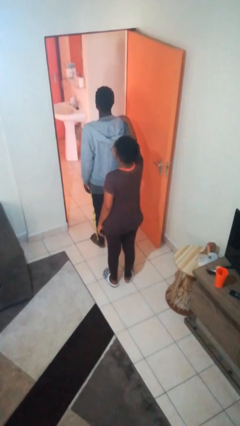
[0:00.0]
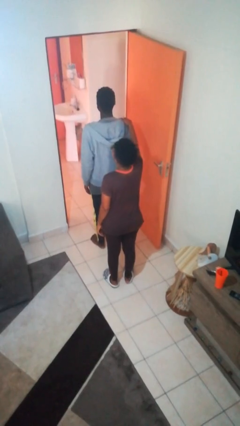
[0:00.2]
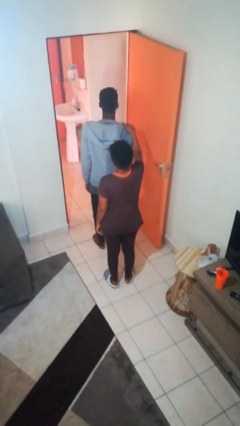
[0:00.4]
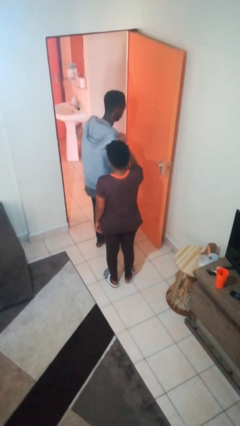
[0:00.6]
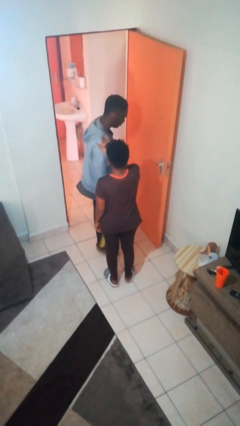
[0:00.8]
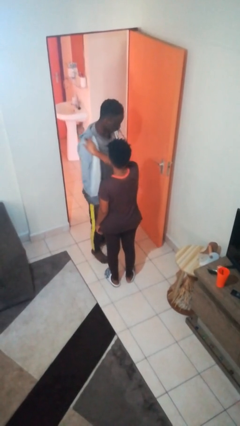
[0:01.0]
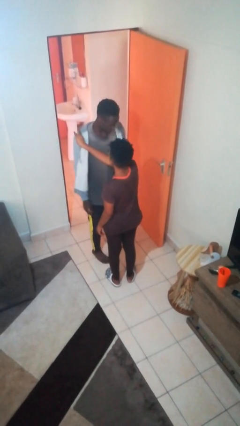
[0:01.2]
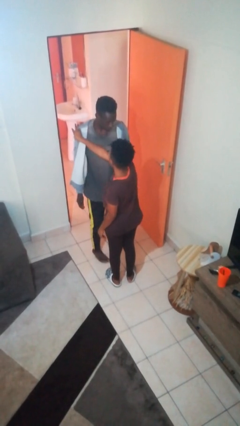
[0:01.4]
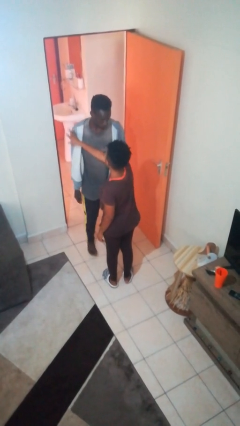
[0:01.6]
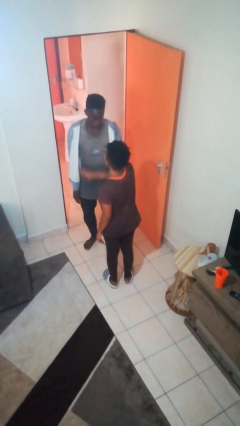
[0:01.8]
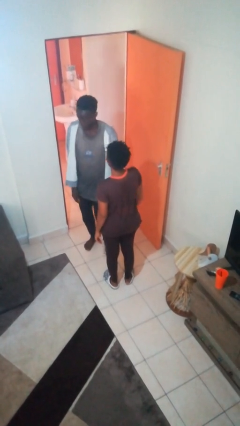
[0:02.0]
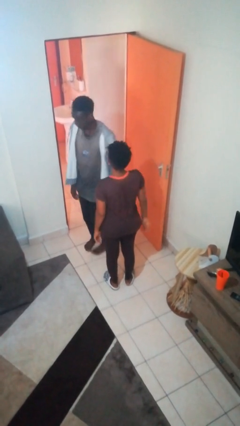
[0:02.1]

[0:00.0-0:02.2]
person spins person around

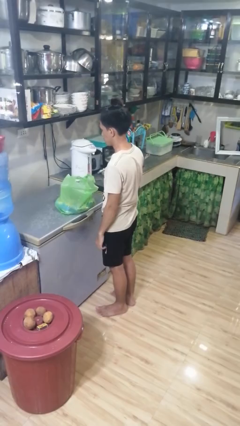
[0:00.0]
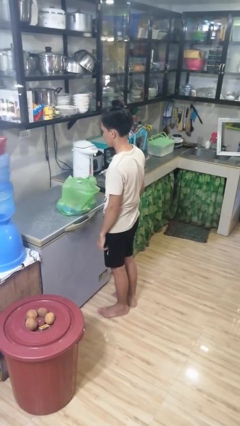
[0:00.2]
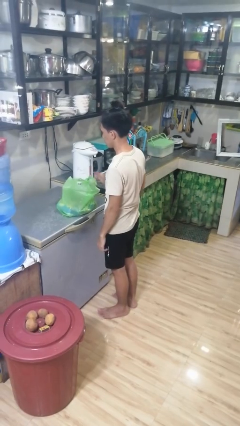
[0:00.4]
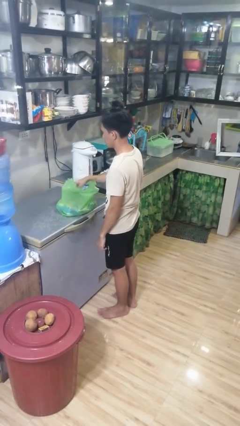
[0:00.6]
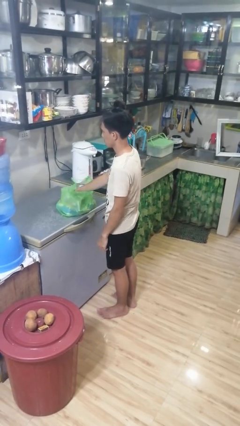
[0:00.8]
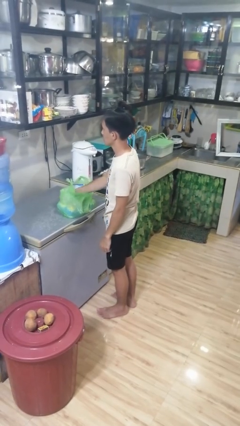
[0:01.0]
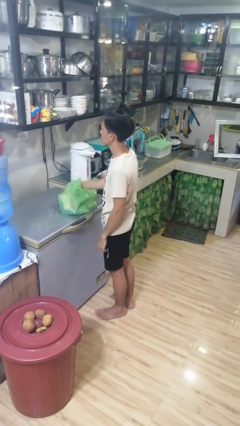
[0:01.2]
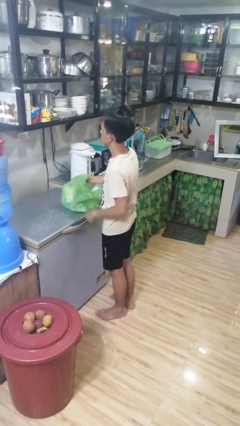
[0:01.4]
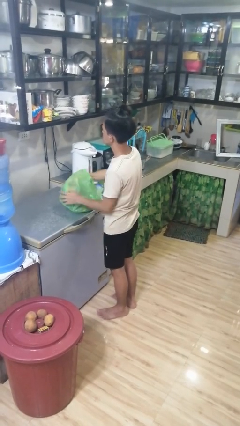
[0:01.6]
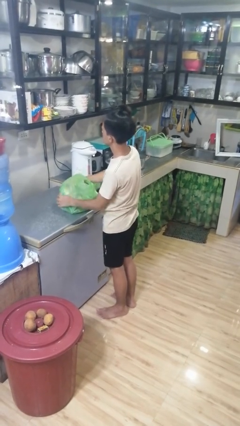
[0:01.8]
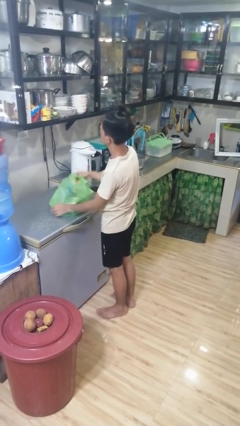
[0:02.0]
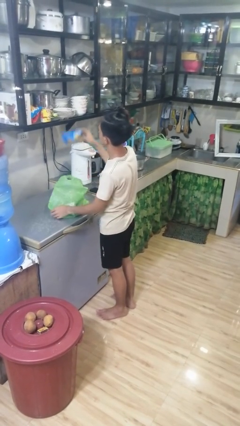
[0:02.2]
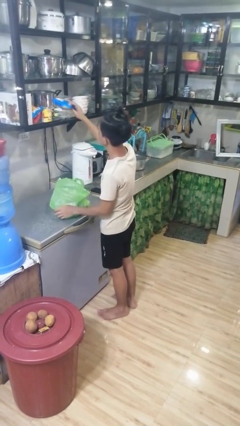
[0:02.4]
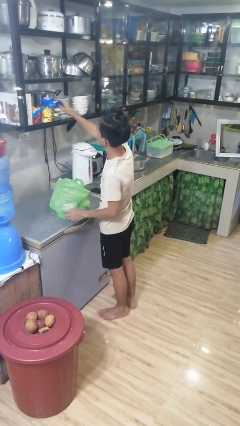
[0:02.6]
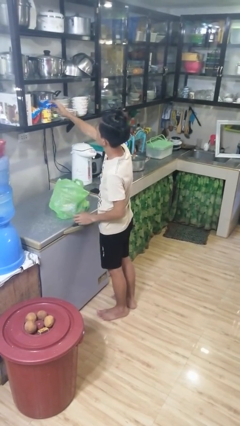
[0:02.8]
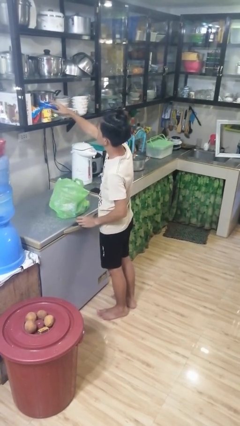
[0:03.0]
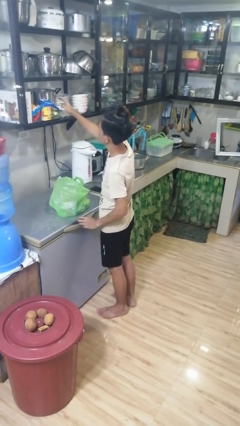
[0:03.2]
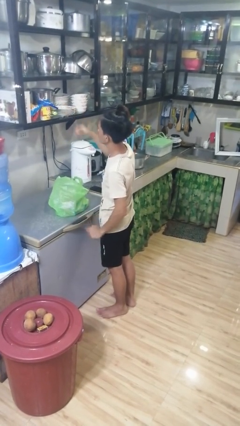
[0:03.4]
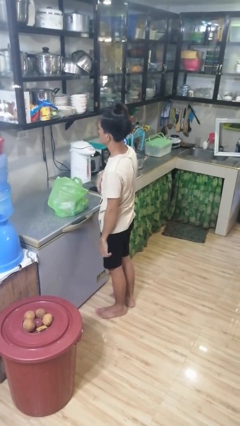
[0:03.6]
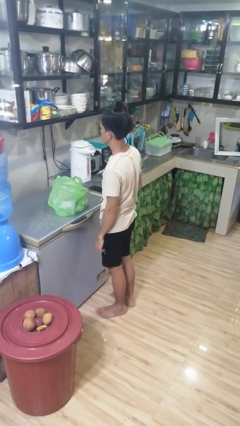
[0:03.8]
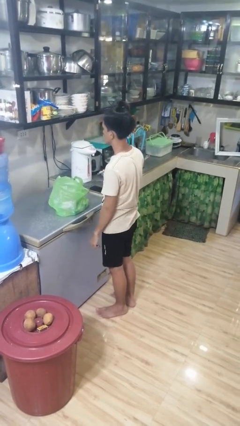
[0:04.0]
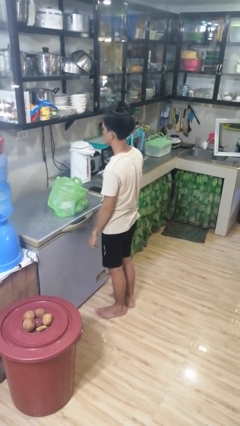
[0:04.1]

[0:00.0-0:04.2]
person loads groceries into cabinet

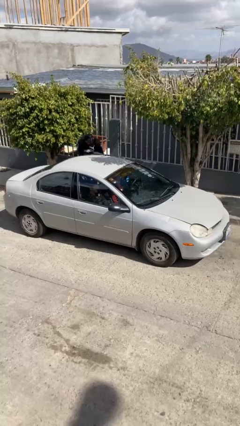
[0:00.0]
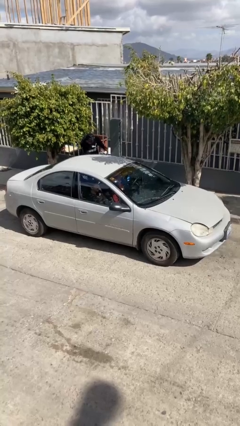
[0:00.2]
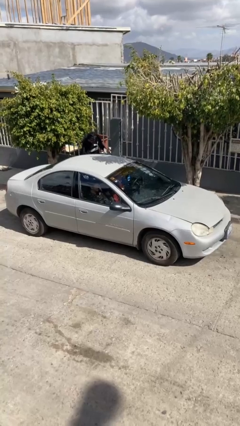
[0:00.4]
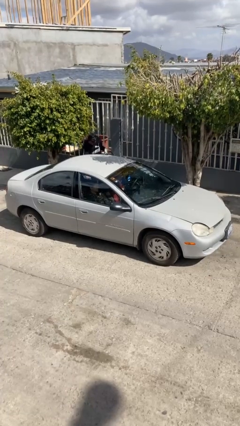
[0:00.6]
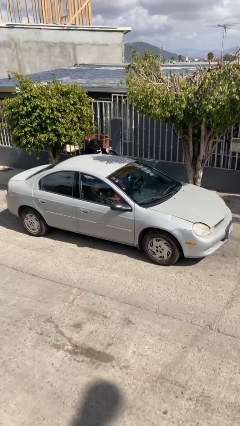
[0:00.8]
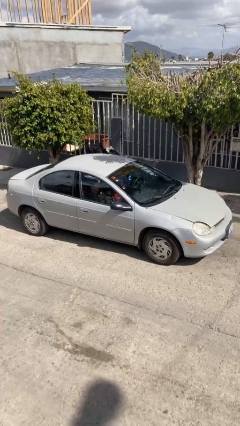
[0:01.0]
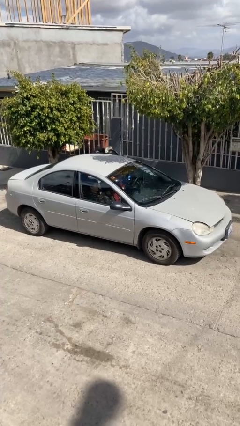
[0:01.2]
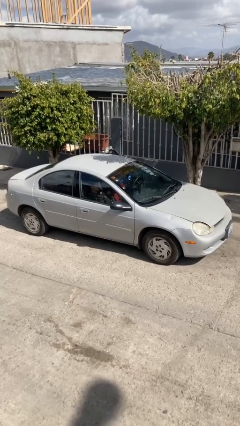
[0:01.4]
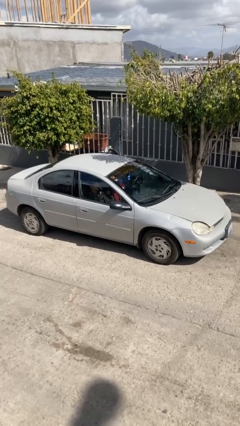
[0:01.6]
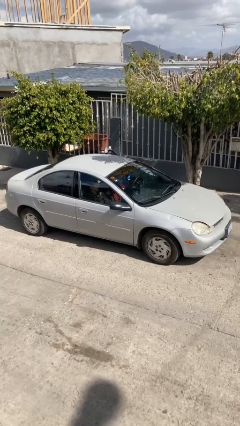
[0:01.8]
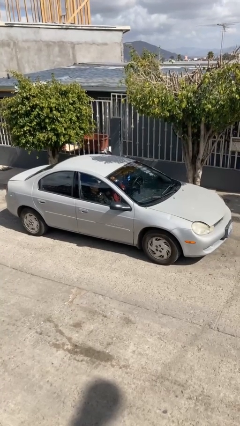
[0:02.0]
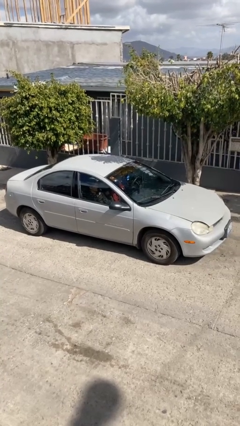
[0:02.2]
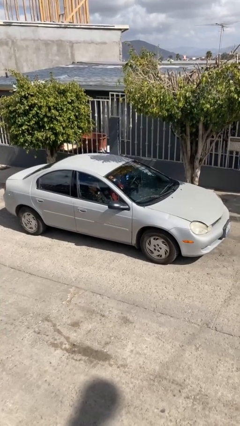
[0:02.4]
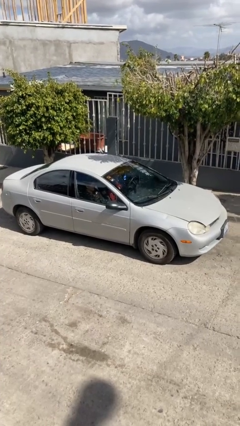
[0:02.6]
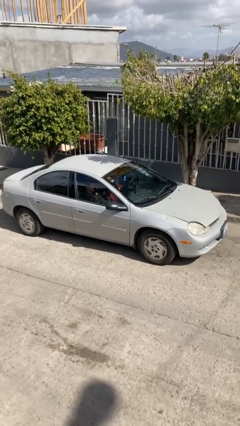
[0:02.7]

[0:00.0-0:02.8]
car picks up person

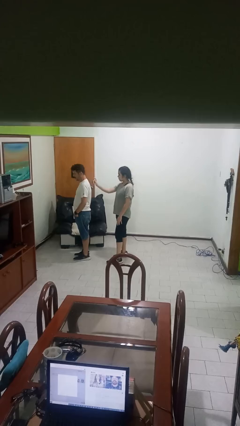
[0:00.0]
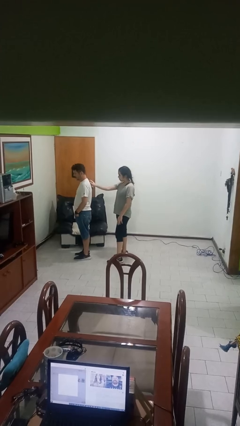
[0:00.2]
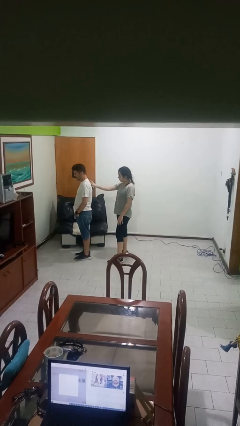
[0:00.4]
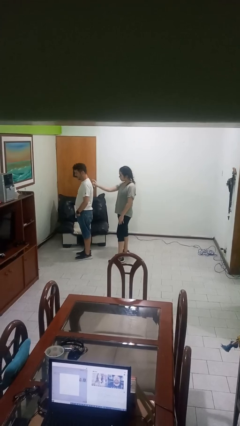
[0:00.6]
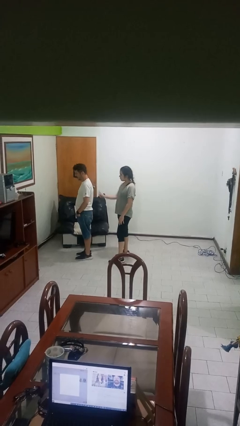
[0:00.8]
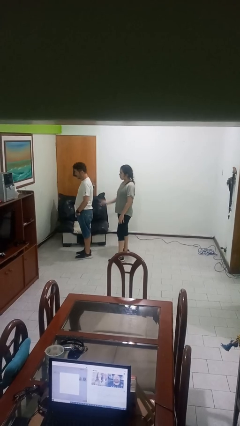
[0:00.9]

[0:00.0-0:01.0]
person touches back of person

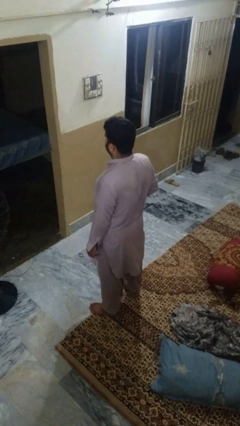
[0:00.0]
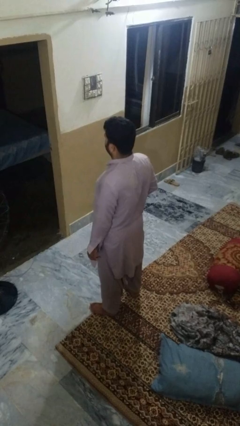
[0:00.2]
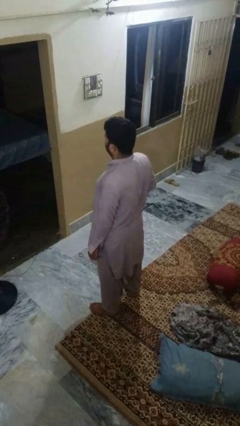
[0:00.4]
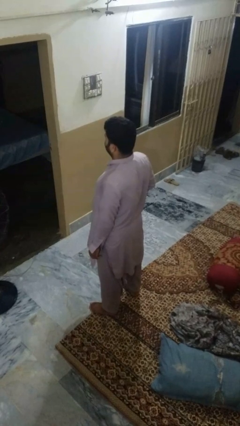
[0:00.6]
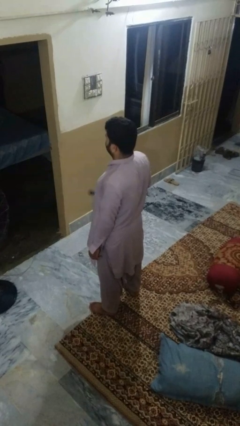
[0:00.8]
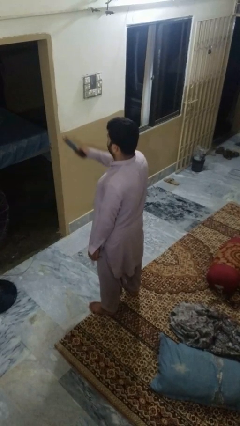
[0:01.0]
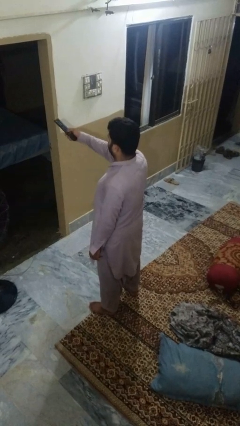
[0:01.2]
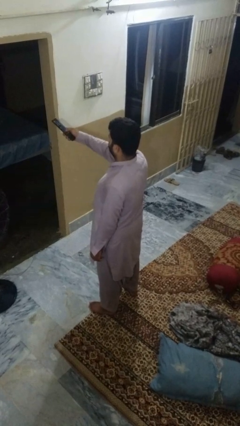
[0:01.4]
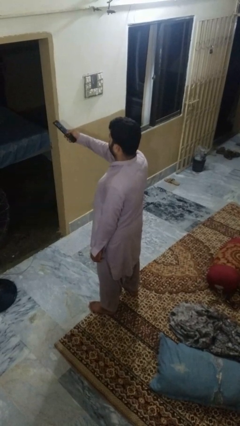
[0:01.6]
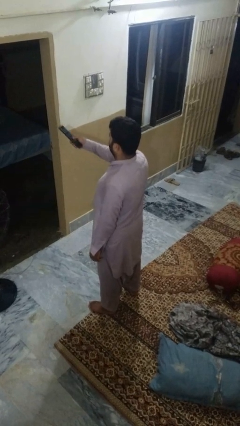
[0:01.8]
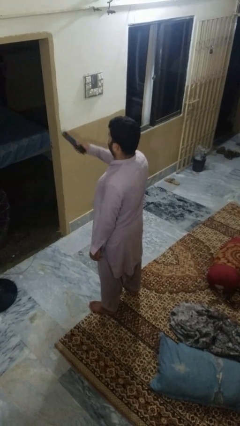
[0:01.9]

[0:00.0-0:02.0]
person uses television remote

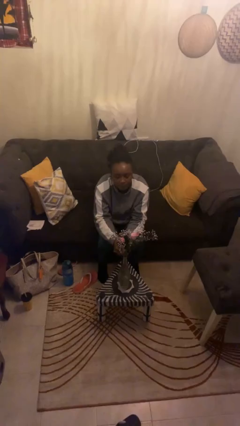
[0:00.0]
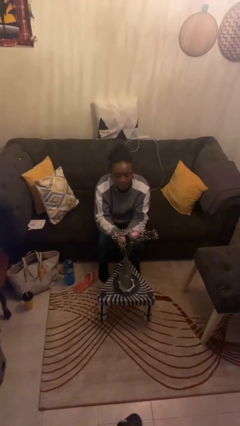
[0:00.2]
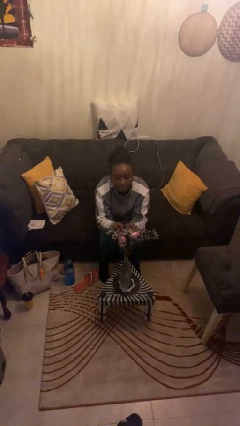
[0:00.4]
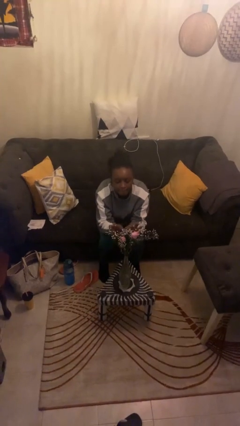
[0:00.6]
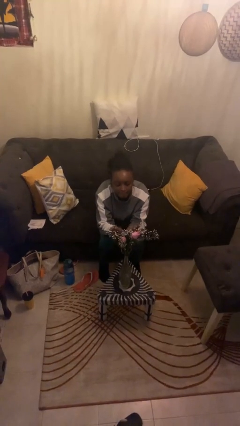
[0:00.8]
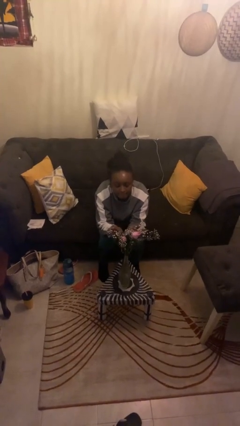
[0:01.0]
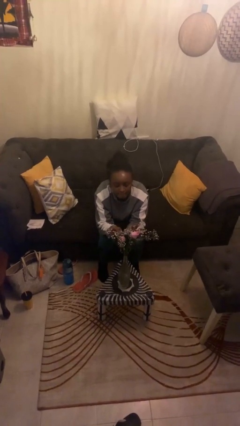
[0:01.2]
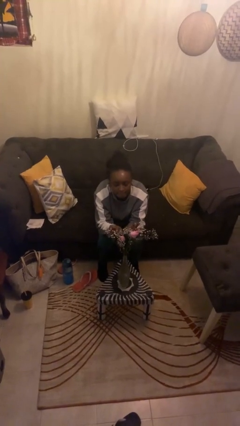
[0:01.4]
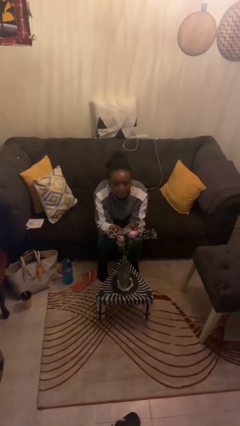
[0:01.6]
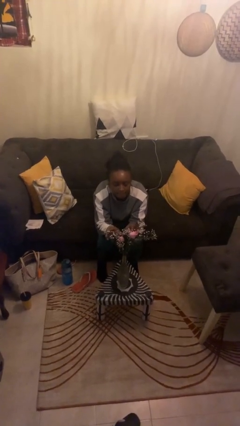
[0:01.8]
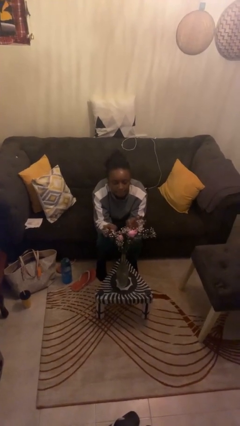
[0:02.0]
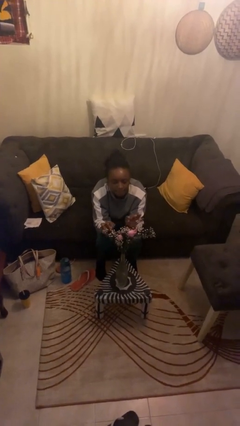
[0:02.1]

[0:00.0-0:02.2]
person arranges flowers in vase

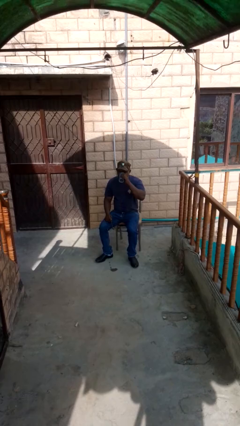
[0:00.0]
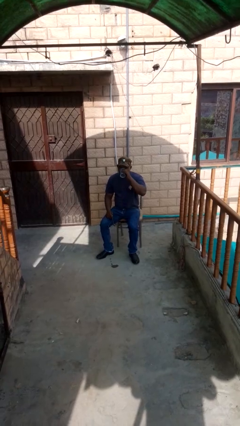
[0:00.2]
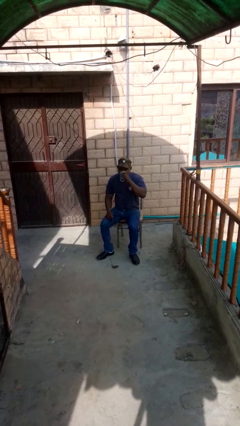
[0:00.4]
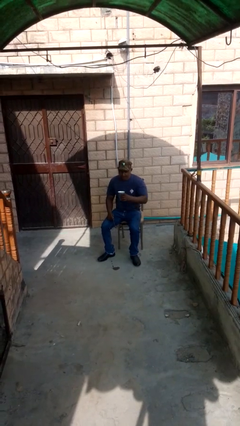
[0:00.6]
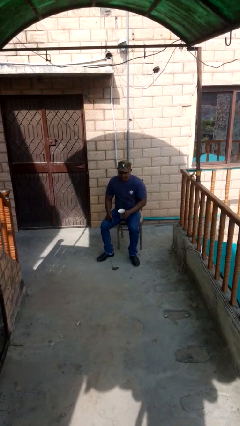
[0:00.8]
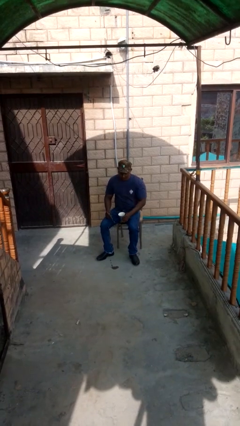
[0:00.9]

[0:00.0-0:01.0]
person drinks from mug

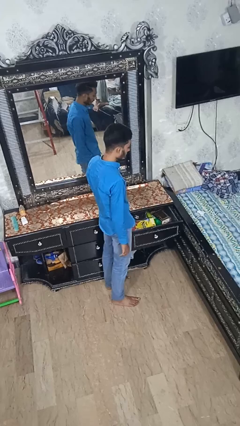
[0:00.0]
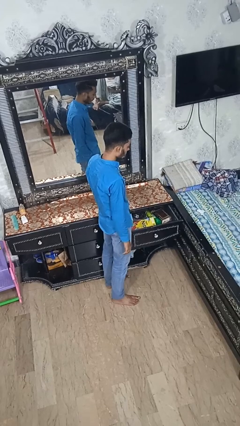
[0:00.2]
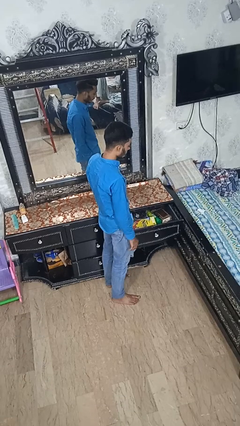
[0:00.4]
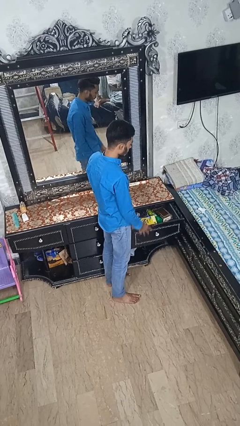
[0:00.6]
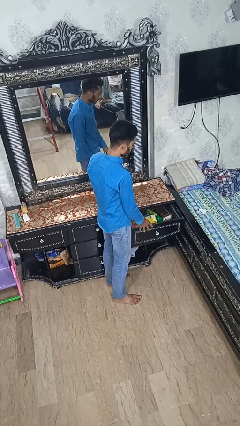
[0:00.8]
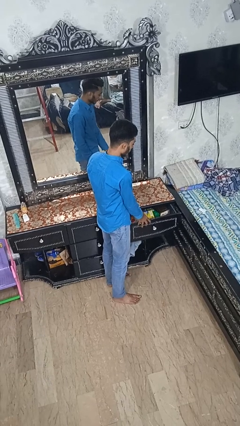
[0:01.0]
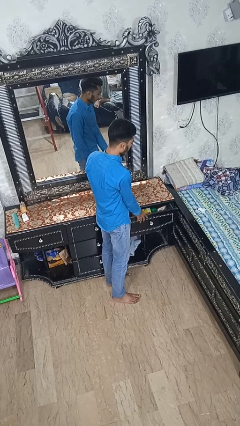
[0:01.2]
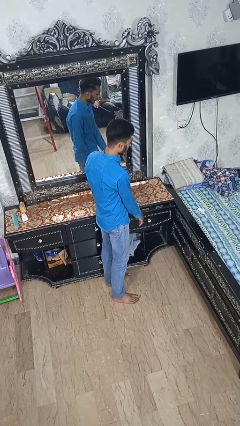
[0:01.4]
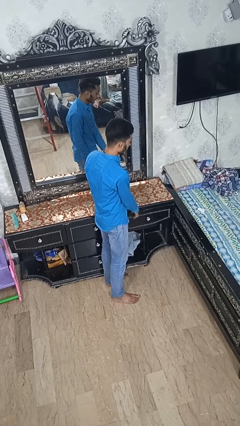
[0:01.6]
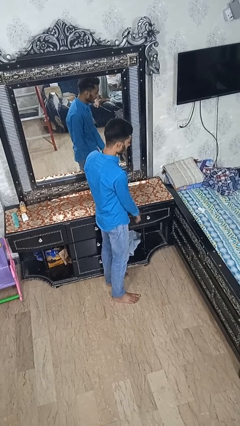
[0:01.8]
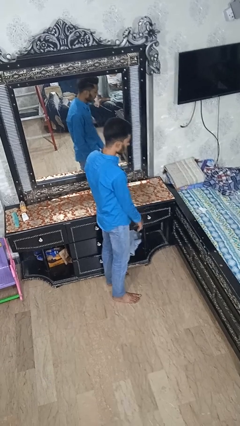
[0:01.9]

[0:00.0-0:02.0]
person closes dresser drawer
